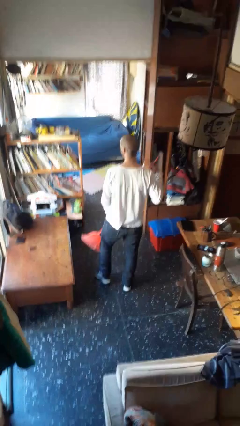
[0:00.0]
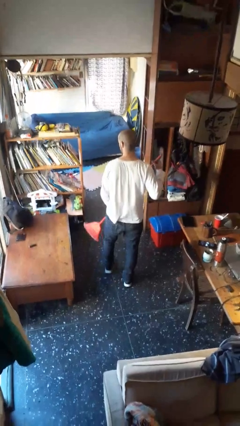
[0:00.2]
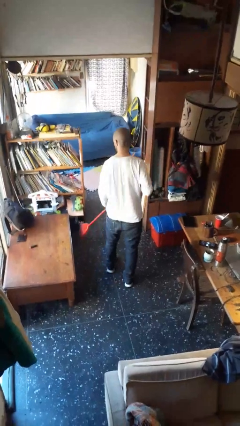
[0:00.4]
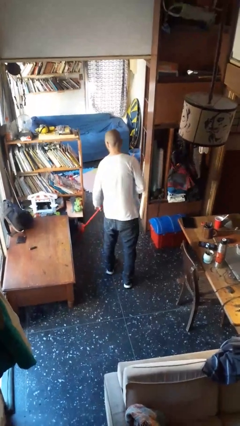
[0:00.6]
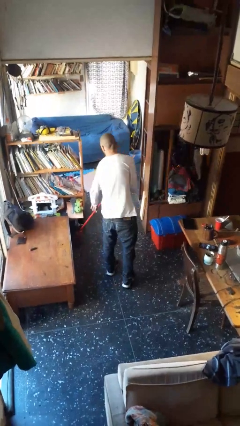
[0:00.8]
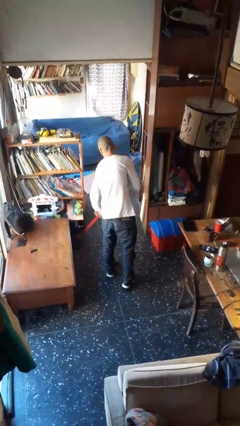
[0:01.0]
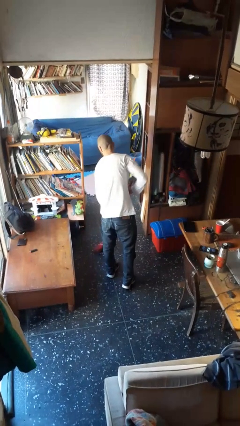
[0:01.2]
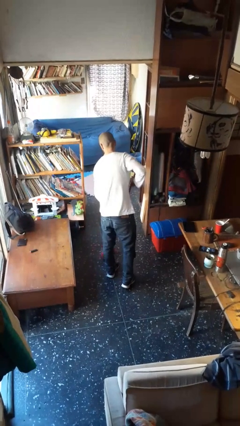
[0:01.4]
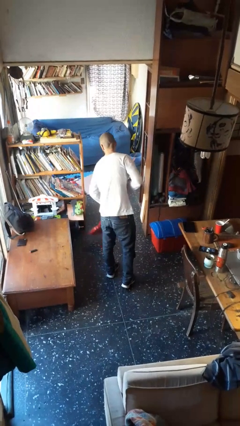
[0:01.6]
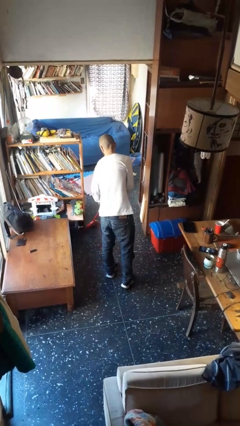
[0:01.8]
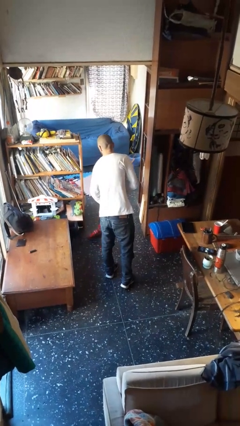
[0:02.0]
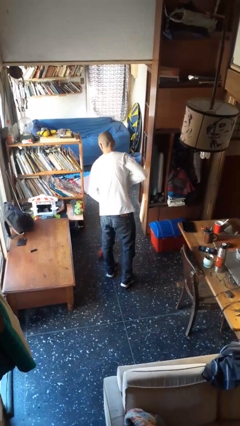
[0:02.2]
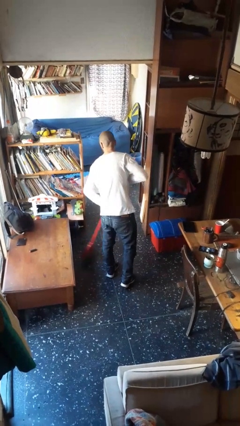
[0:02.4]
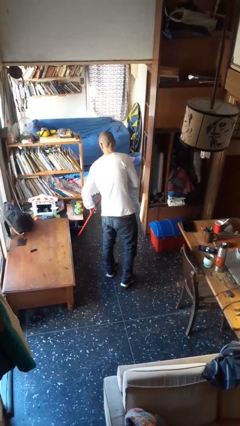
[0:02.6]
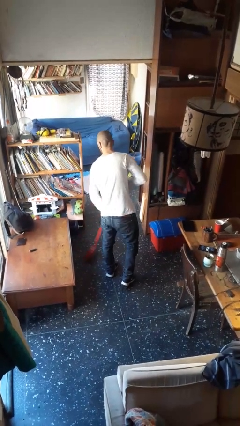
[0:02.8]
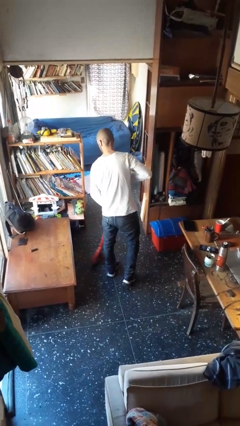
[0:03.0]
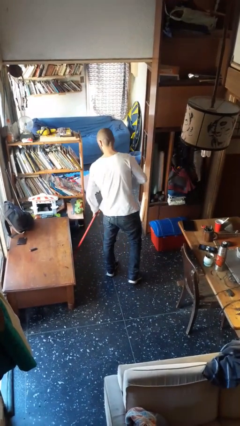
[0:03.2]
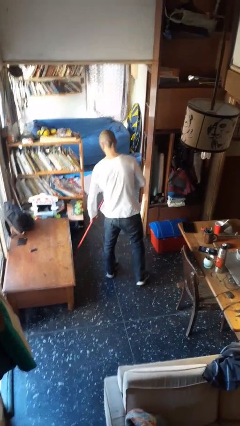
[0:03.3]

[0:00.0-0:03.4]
person sweeps floor

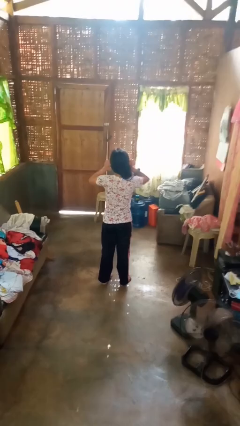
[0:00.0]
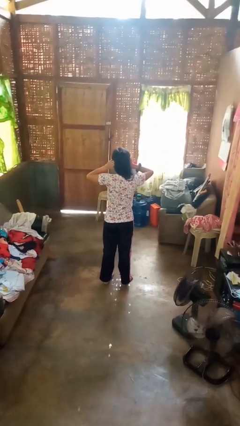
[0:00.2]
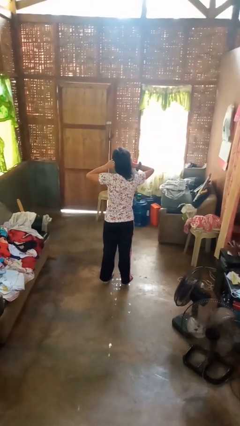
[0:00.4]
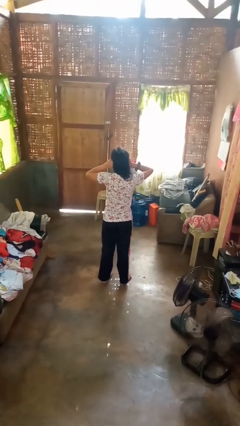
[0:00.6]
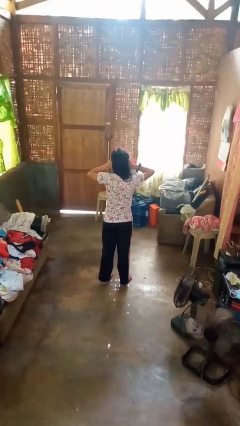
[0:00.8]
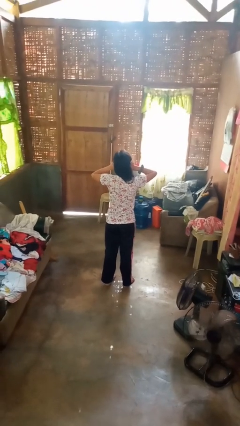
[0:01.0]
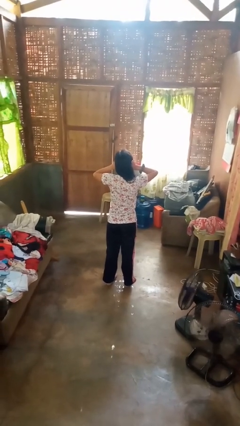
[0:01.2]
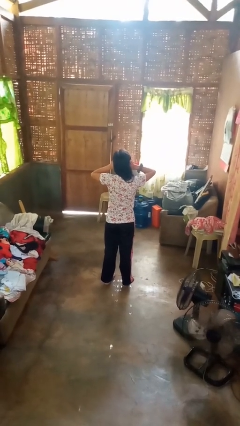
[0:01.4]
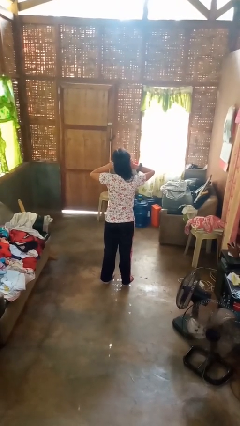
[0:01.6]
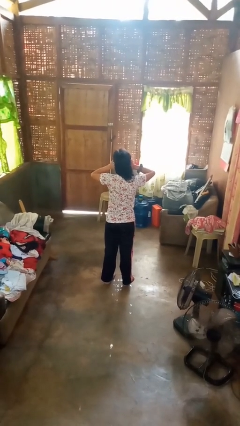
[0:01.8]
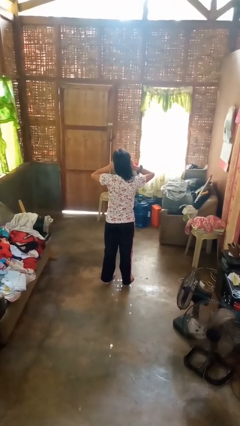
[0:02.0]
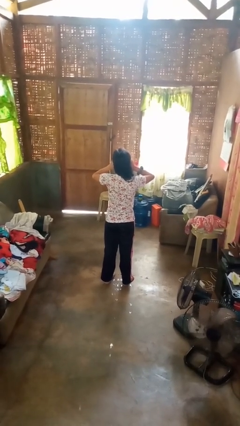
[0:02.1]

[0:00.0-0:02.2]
person puts fingers in ear

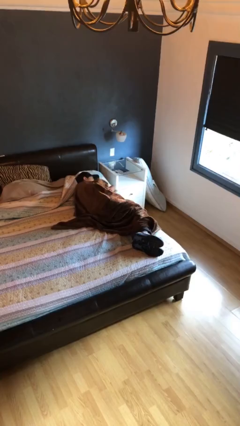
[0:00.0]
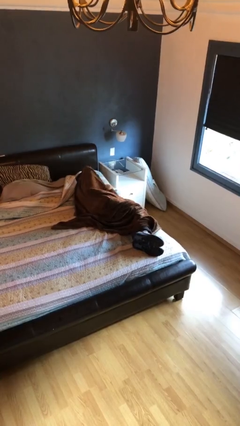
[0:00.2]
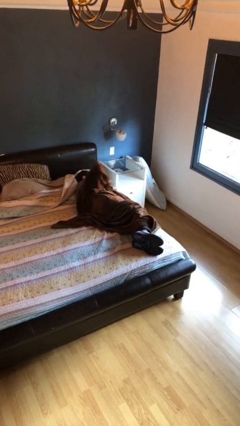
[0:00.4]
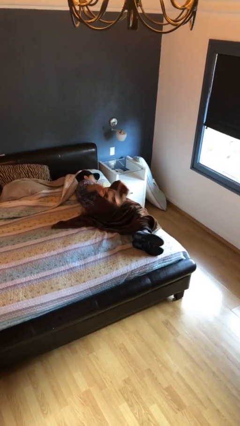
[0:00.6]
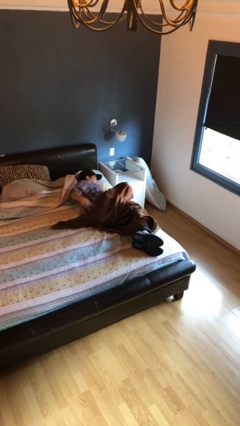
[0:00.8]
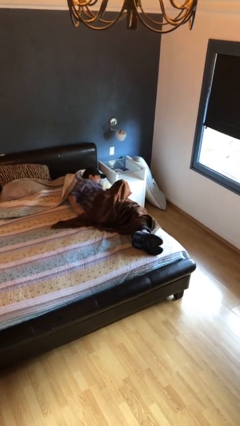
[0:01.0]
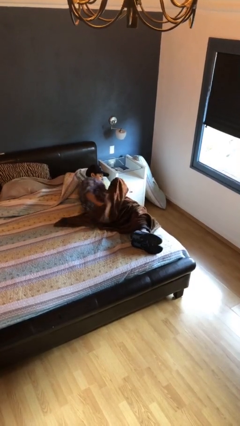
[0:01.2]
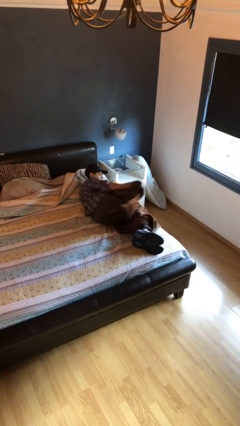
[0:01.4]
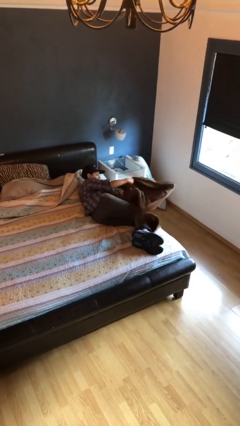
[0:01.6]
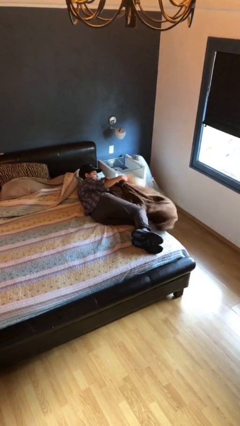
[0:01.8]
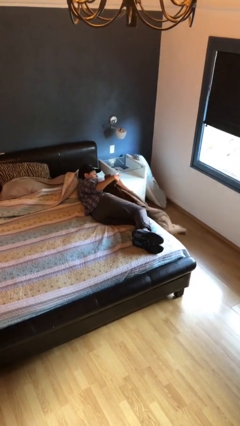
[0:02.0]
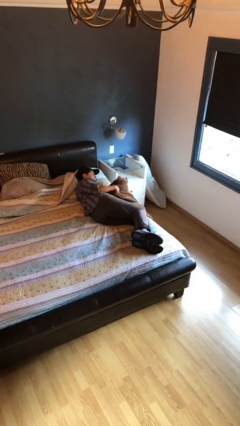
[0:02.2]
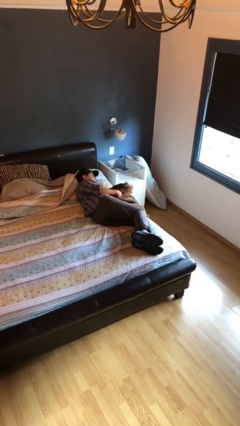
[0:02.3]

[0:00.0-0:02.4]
person uncovers with blanket

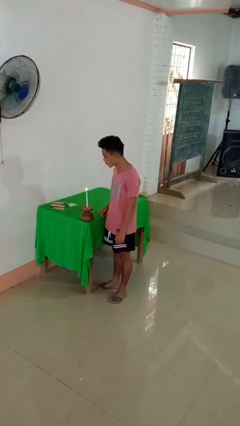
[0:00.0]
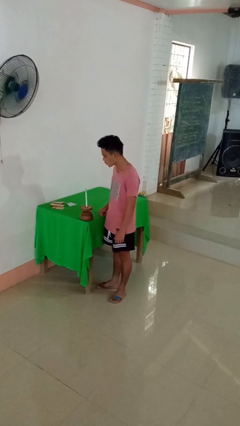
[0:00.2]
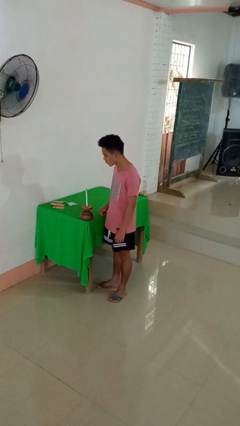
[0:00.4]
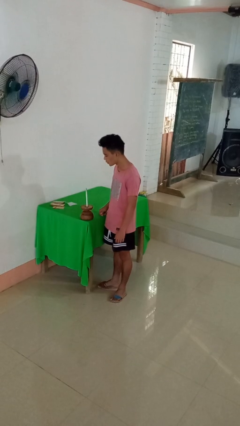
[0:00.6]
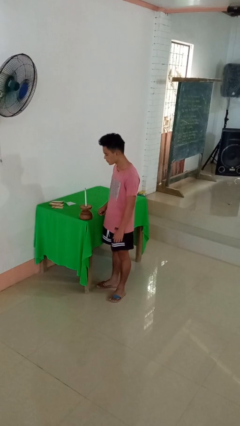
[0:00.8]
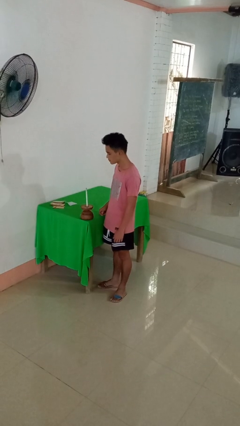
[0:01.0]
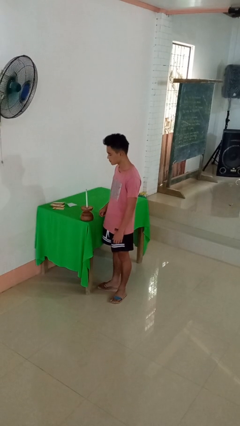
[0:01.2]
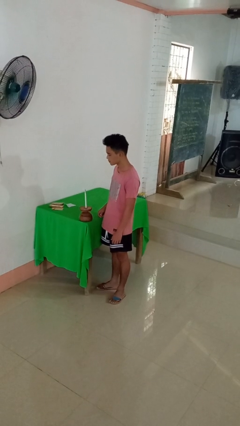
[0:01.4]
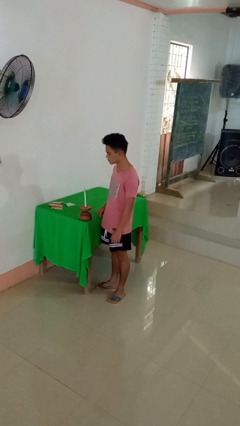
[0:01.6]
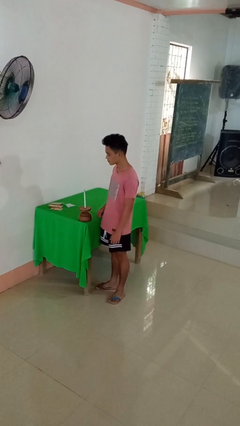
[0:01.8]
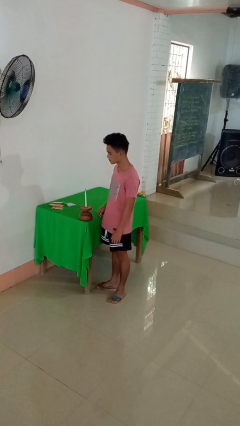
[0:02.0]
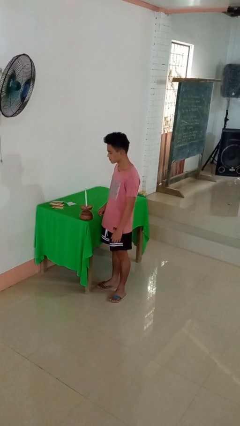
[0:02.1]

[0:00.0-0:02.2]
person extinguishes candle

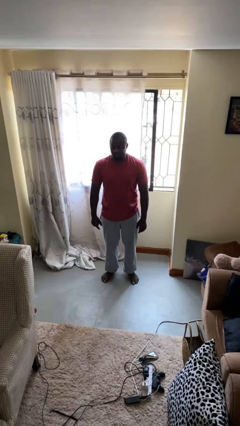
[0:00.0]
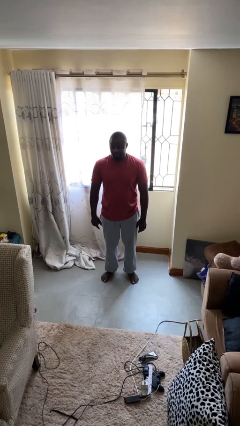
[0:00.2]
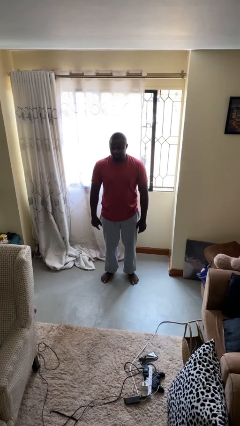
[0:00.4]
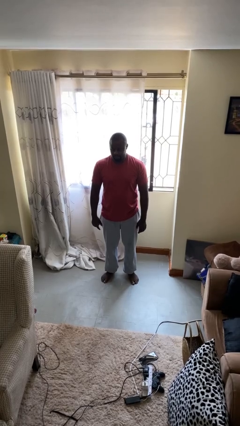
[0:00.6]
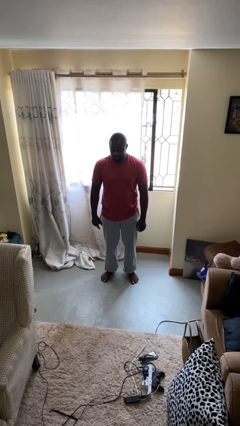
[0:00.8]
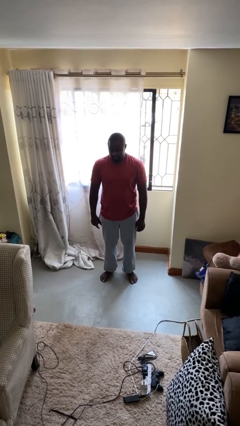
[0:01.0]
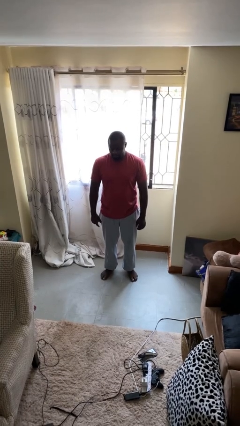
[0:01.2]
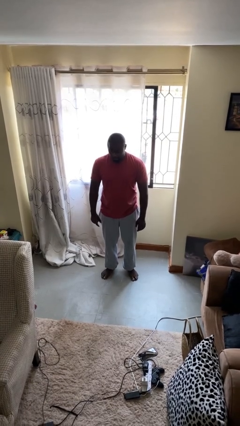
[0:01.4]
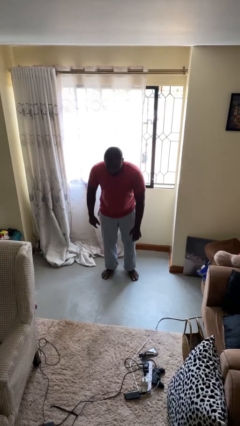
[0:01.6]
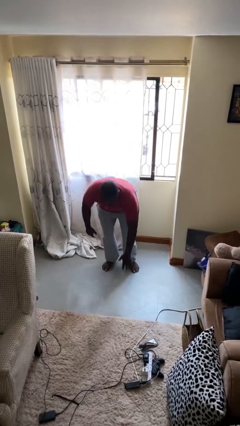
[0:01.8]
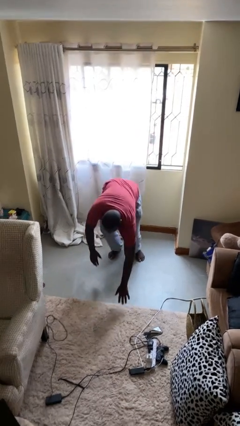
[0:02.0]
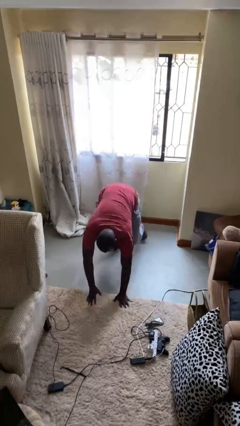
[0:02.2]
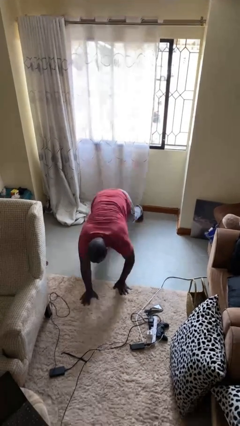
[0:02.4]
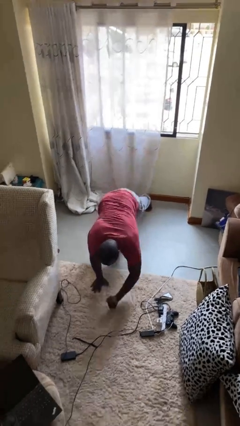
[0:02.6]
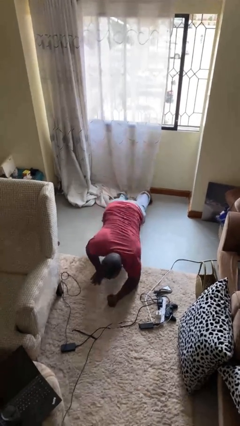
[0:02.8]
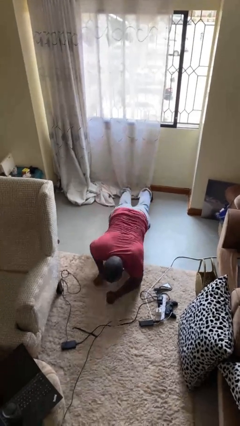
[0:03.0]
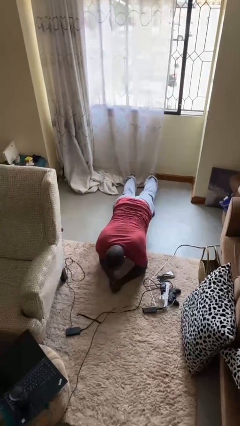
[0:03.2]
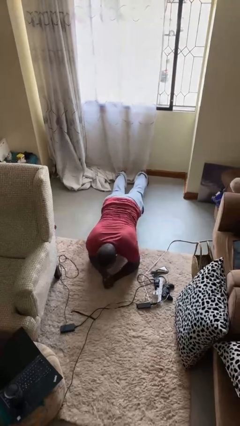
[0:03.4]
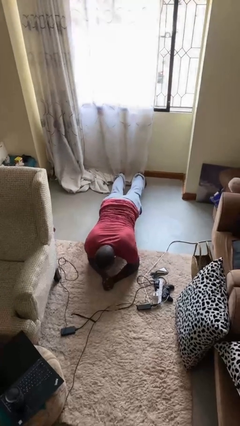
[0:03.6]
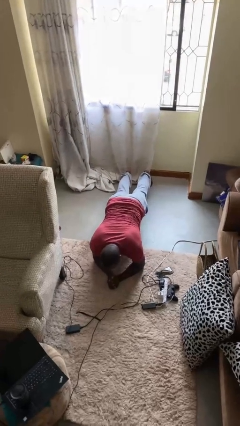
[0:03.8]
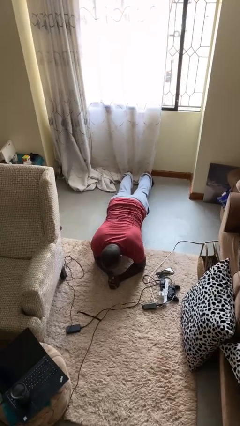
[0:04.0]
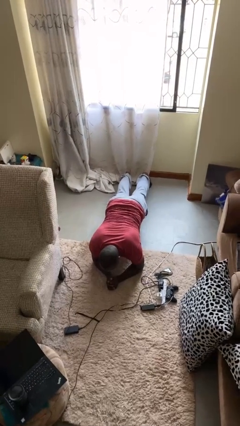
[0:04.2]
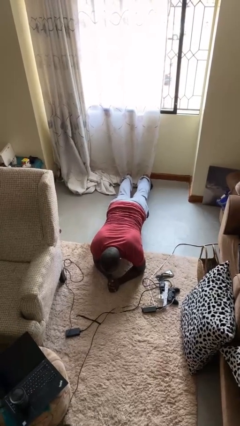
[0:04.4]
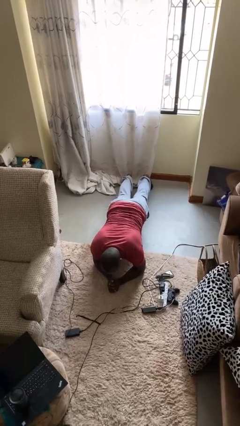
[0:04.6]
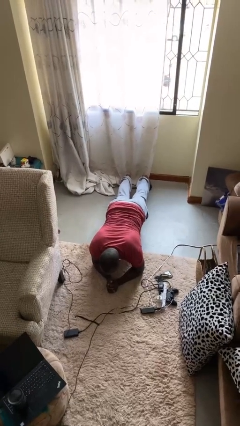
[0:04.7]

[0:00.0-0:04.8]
person exercises with plank

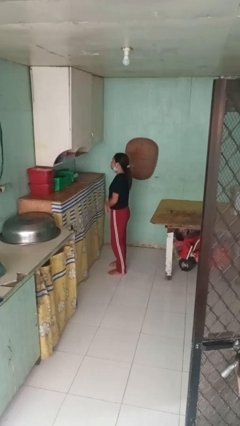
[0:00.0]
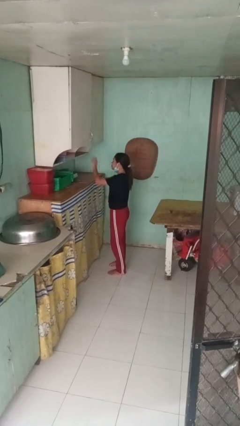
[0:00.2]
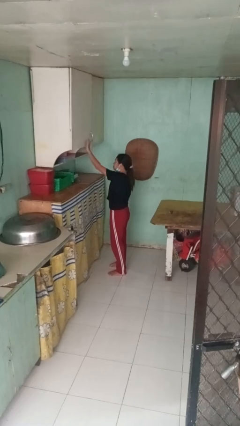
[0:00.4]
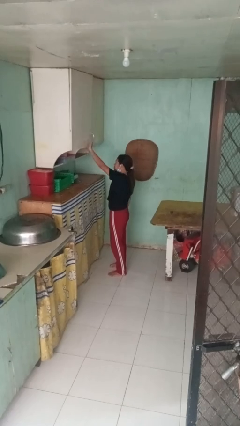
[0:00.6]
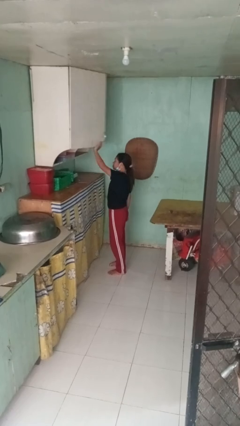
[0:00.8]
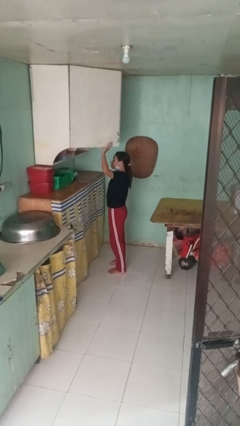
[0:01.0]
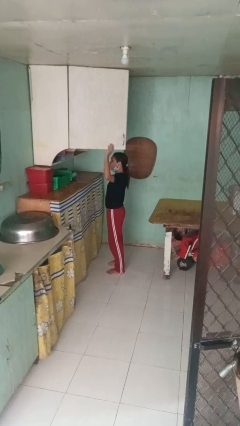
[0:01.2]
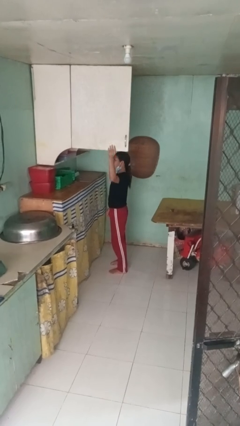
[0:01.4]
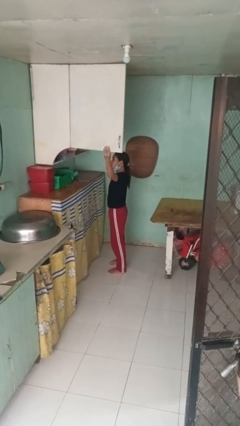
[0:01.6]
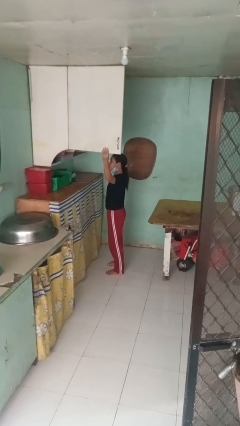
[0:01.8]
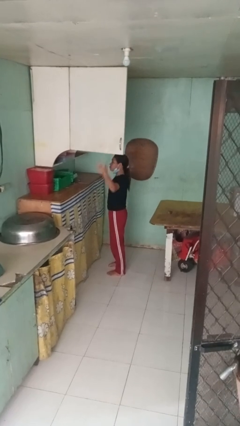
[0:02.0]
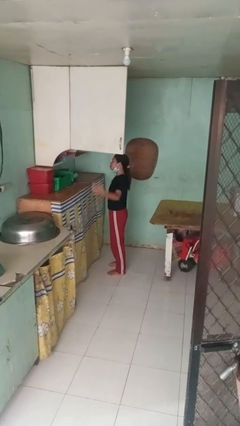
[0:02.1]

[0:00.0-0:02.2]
person opens cabinet
